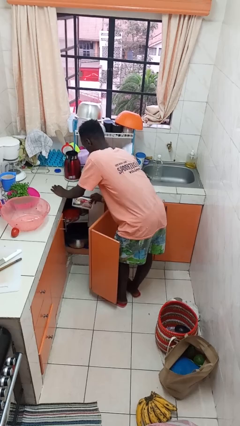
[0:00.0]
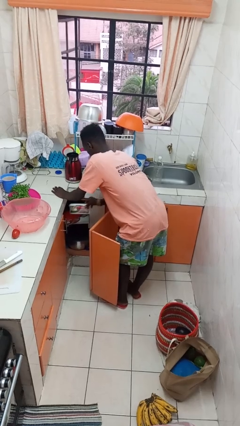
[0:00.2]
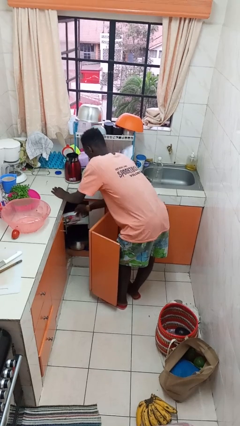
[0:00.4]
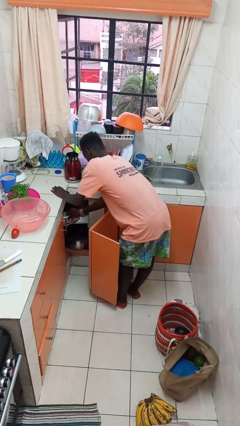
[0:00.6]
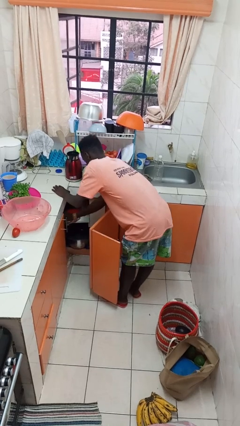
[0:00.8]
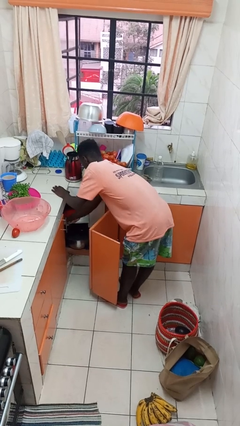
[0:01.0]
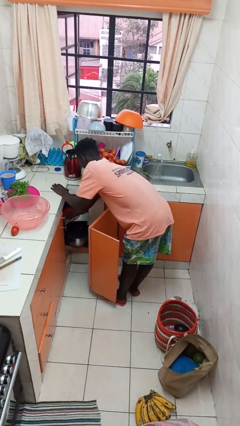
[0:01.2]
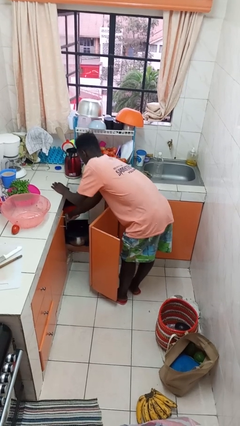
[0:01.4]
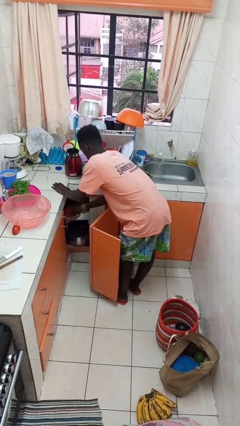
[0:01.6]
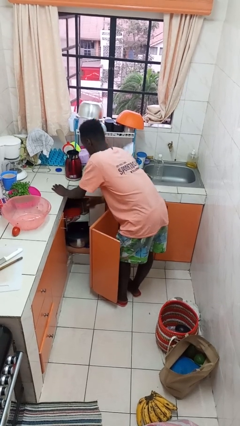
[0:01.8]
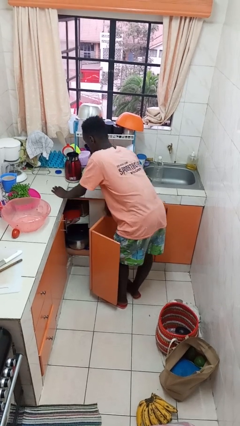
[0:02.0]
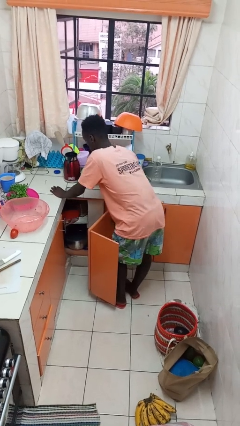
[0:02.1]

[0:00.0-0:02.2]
person puts object in cabinet

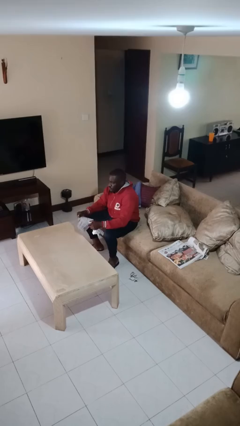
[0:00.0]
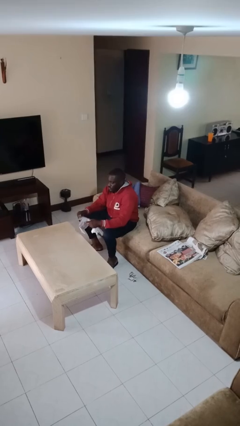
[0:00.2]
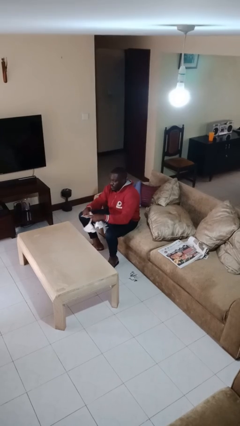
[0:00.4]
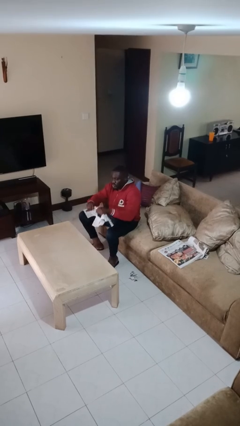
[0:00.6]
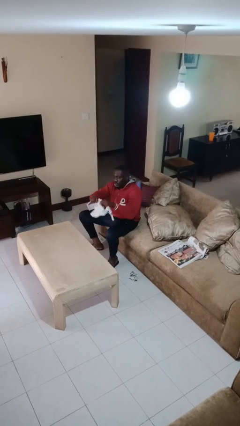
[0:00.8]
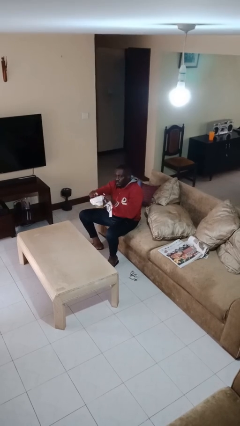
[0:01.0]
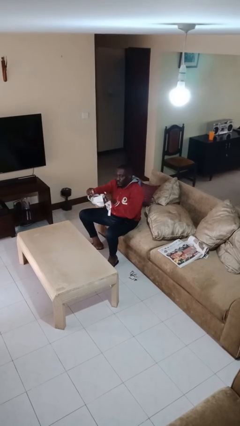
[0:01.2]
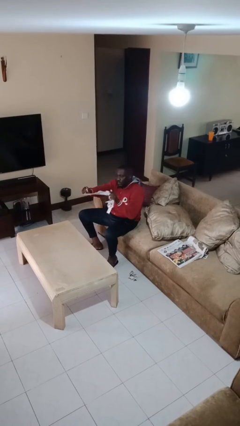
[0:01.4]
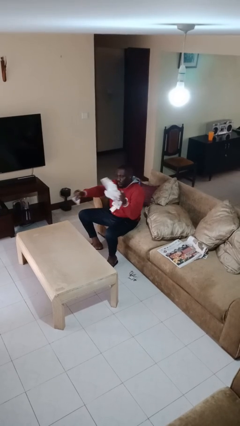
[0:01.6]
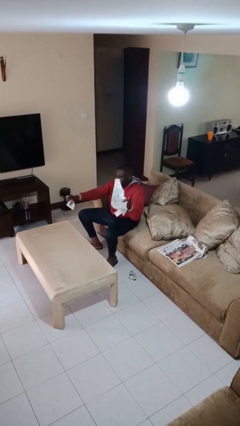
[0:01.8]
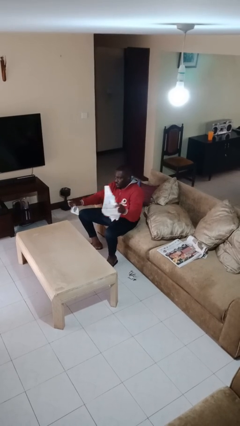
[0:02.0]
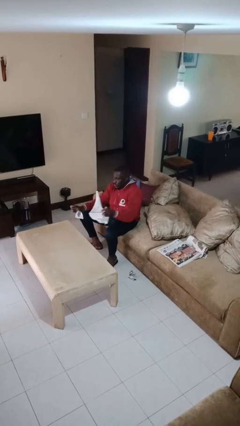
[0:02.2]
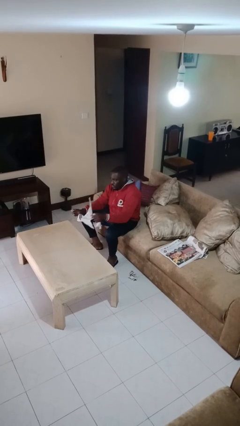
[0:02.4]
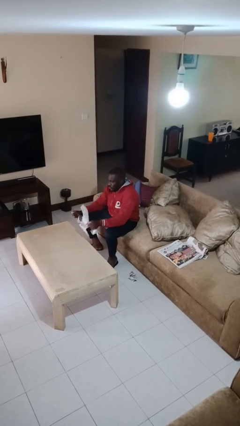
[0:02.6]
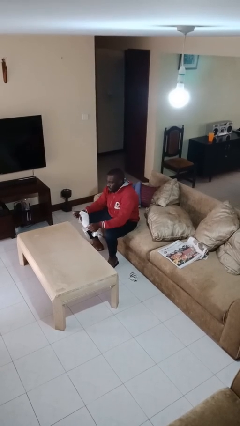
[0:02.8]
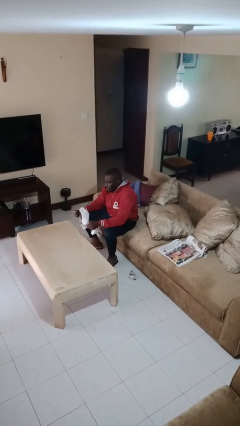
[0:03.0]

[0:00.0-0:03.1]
person tears paper

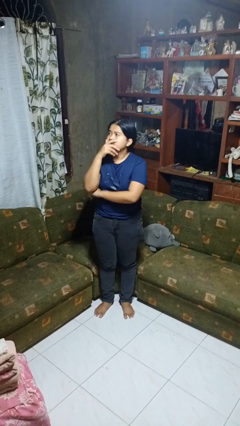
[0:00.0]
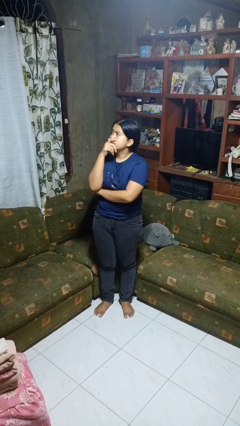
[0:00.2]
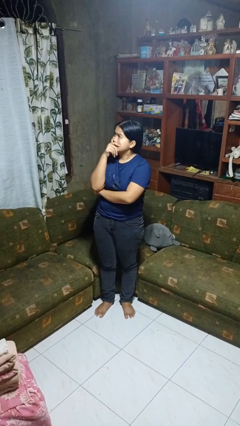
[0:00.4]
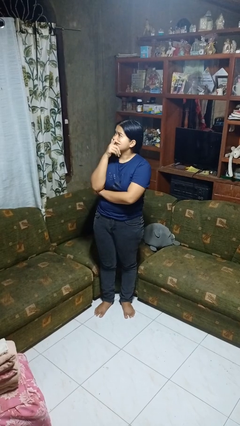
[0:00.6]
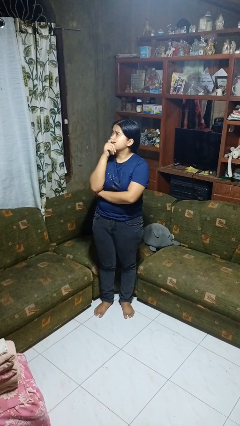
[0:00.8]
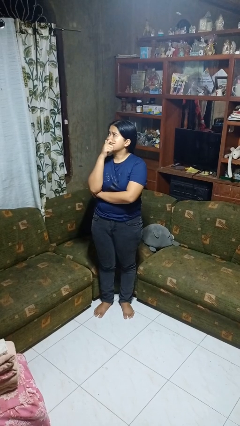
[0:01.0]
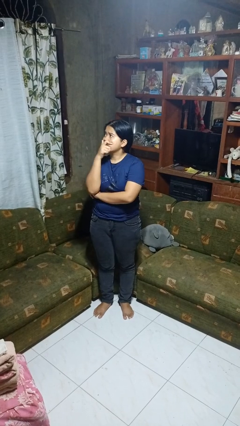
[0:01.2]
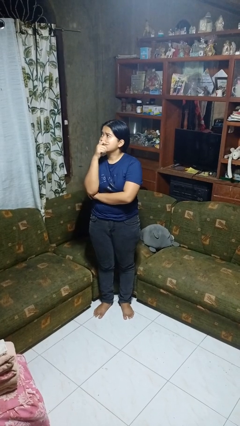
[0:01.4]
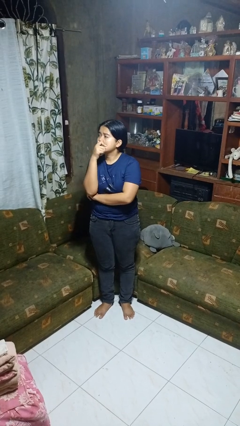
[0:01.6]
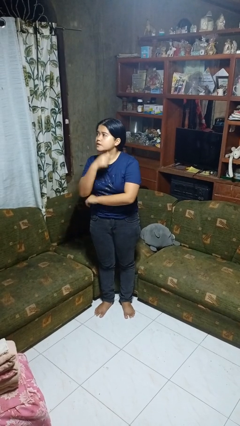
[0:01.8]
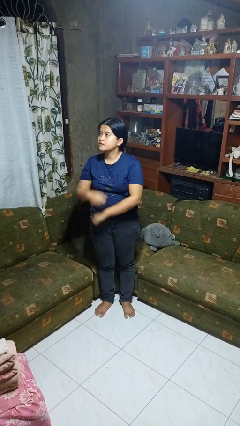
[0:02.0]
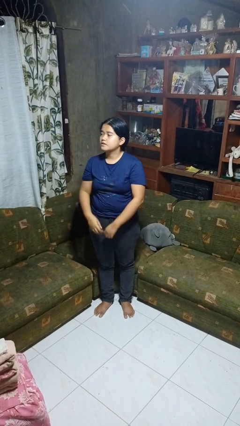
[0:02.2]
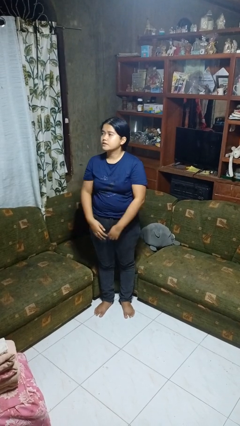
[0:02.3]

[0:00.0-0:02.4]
person strokes chin

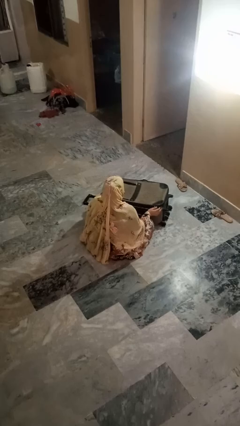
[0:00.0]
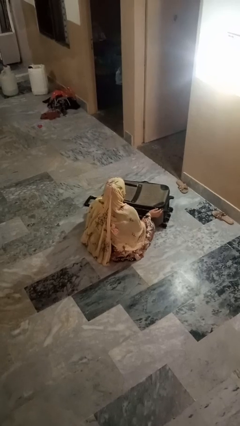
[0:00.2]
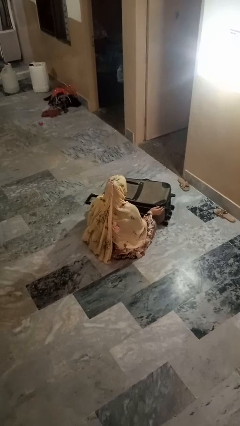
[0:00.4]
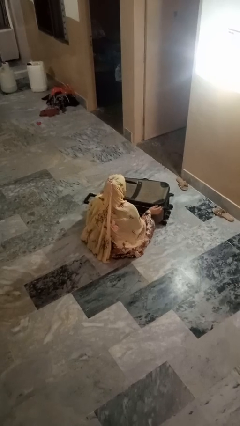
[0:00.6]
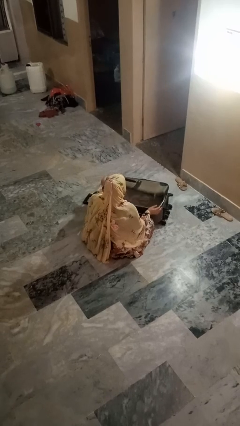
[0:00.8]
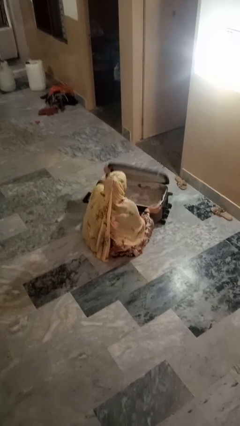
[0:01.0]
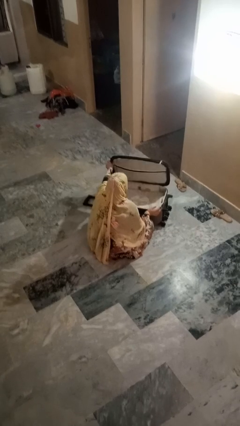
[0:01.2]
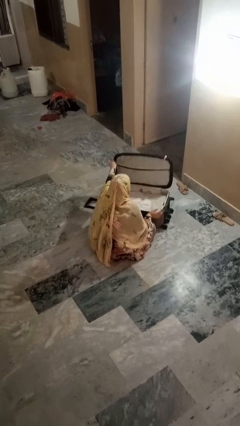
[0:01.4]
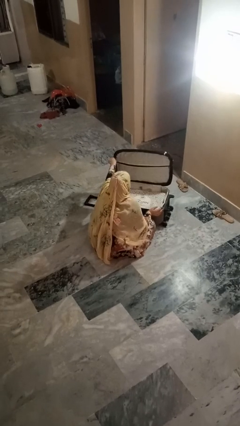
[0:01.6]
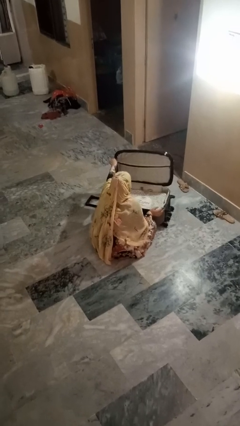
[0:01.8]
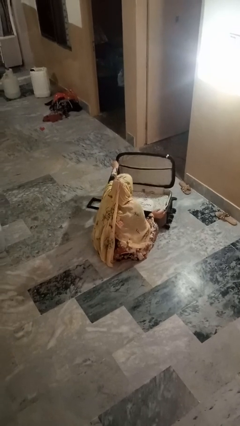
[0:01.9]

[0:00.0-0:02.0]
person opens suitcase

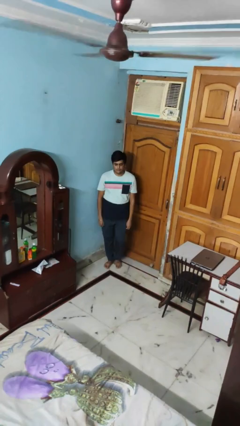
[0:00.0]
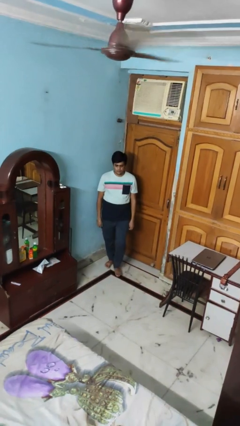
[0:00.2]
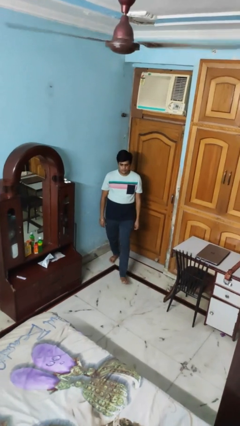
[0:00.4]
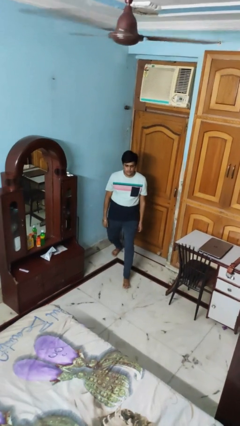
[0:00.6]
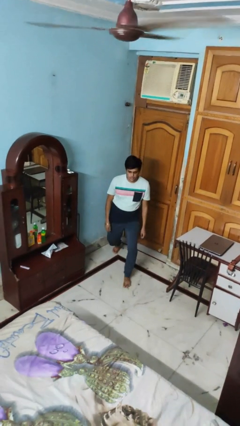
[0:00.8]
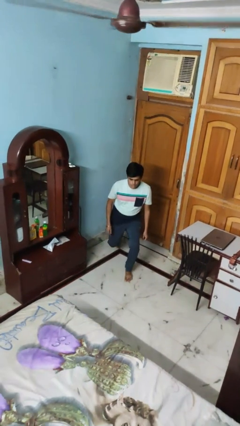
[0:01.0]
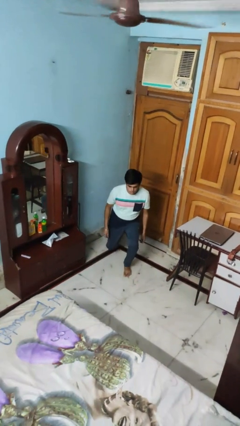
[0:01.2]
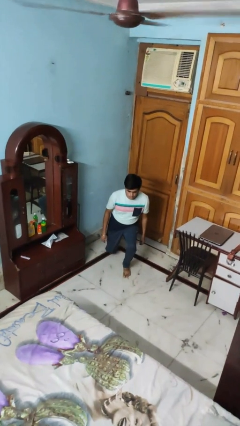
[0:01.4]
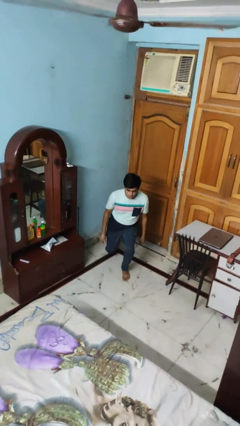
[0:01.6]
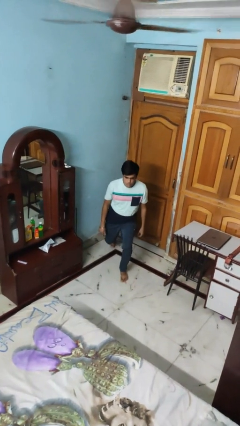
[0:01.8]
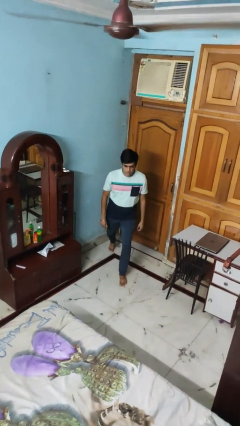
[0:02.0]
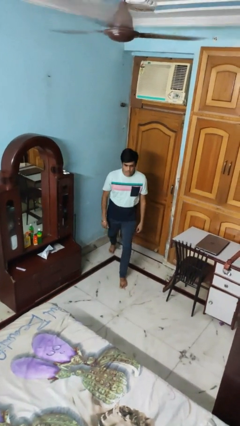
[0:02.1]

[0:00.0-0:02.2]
person exercises with lunges

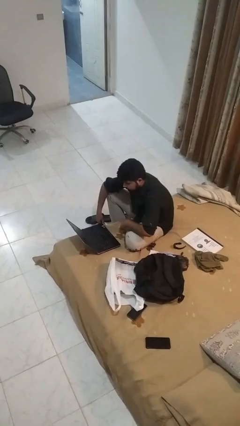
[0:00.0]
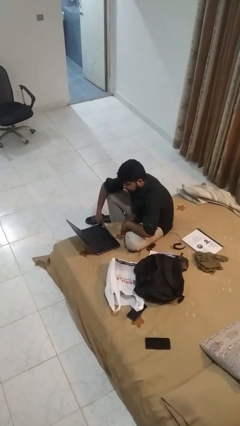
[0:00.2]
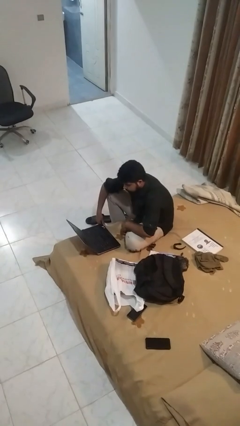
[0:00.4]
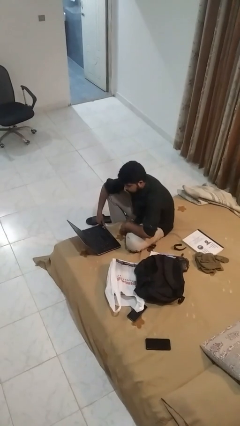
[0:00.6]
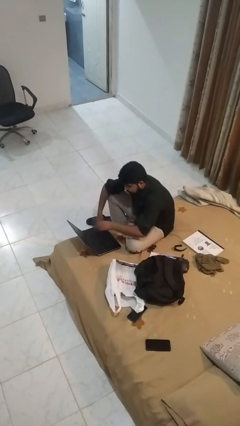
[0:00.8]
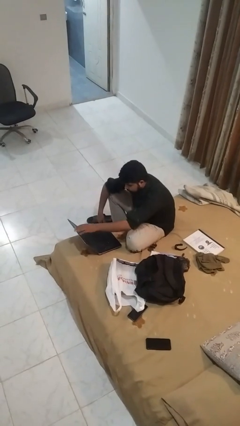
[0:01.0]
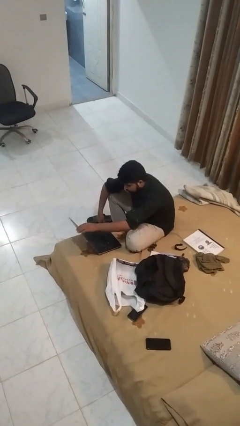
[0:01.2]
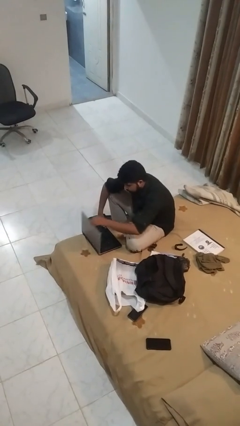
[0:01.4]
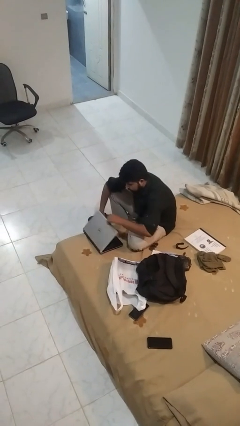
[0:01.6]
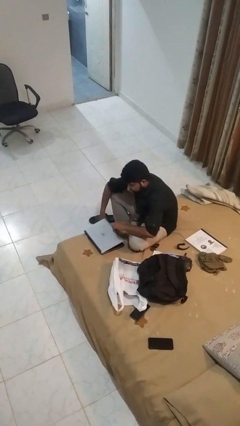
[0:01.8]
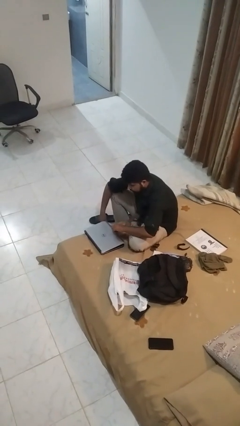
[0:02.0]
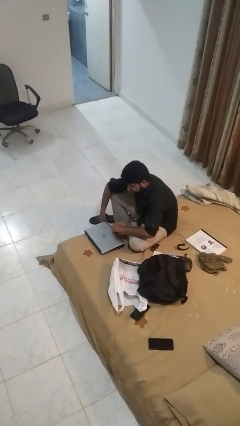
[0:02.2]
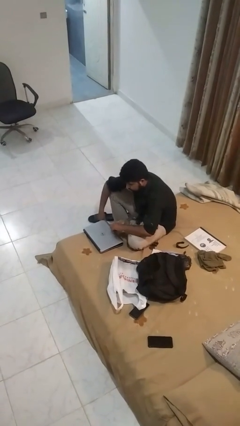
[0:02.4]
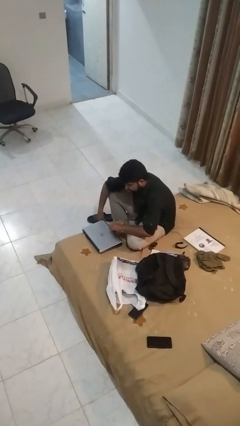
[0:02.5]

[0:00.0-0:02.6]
person closes laptop

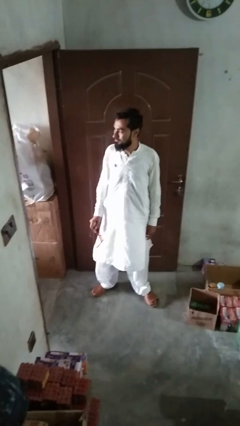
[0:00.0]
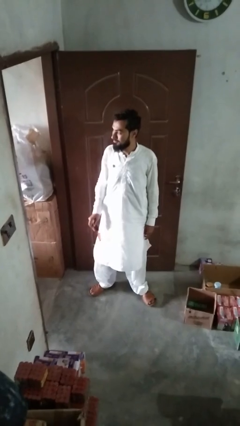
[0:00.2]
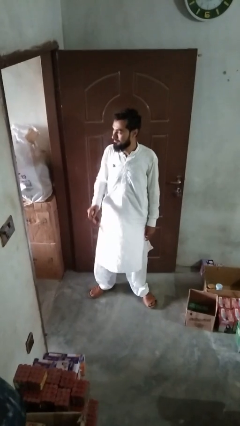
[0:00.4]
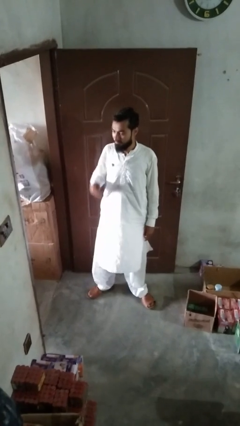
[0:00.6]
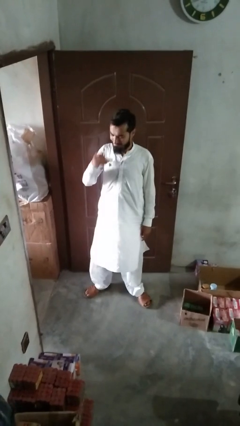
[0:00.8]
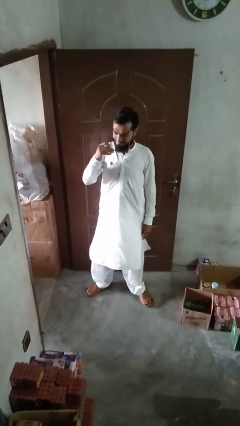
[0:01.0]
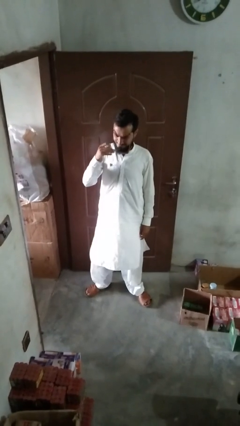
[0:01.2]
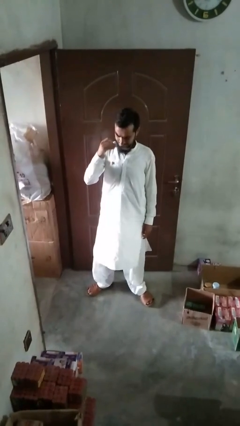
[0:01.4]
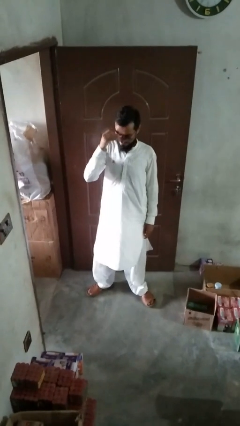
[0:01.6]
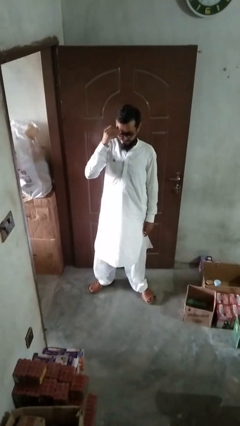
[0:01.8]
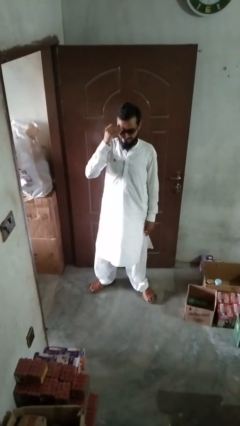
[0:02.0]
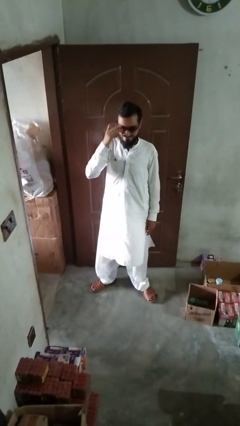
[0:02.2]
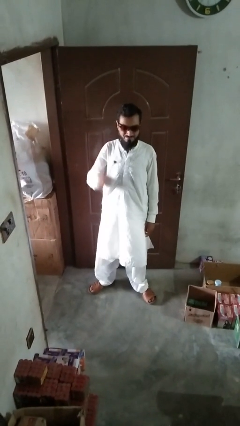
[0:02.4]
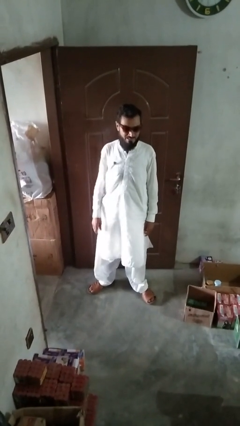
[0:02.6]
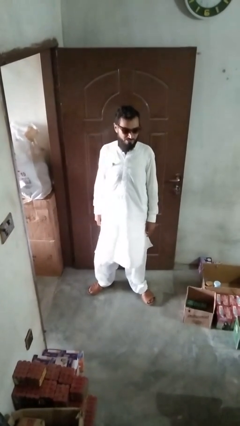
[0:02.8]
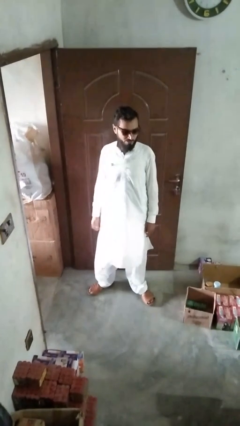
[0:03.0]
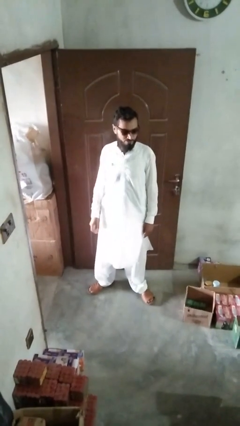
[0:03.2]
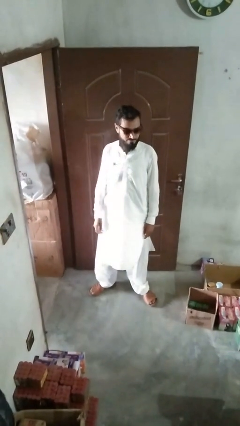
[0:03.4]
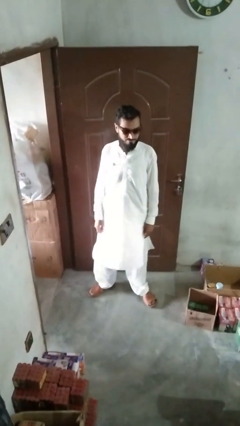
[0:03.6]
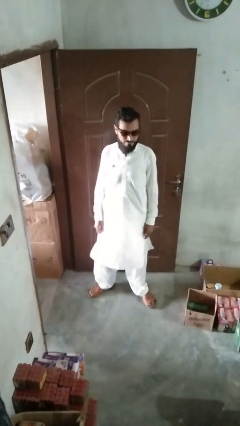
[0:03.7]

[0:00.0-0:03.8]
person puts on sunglasses
